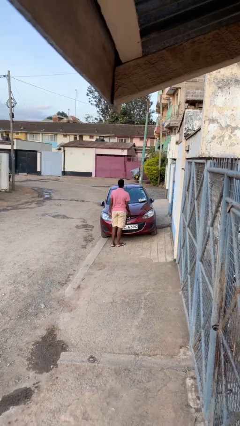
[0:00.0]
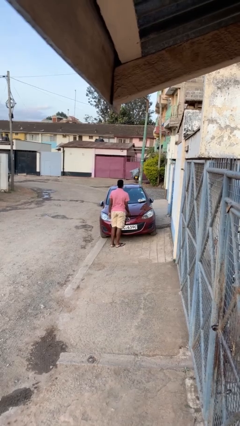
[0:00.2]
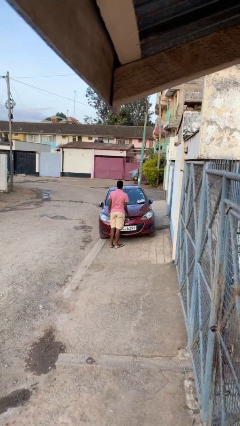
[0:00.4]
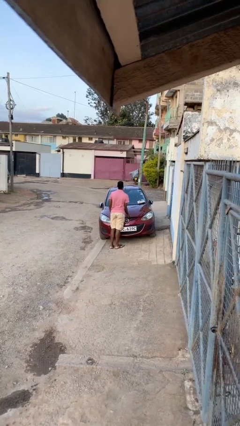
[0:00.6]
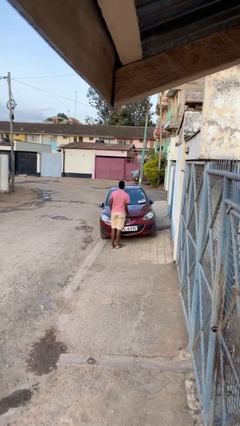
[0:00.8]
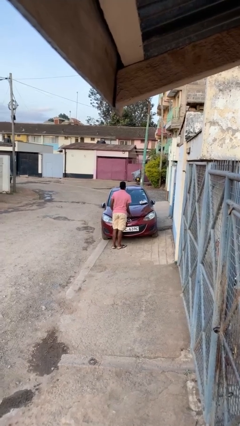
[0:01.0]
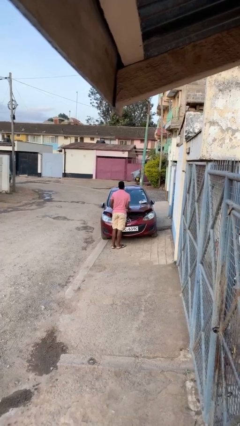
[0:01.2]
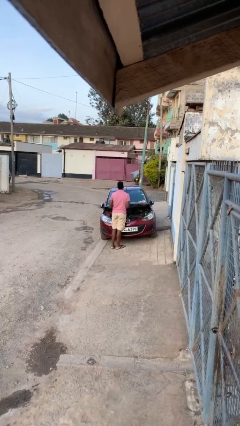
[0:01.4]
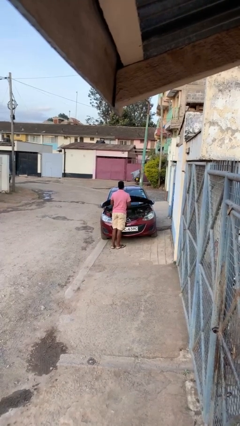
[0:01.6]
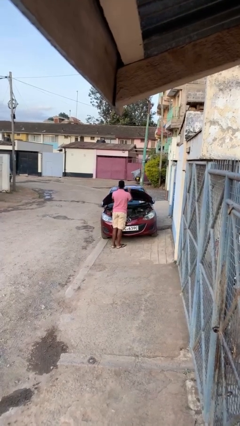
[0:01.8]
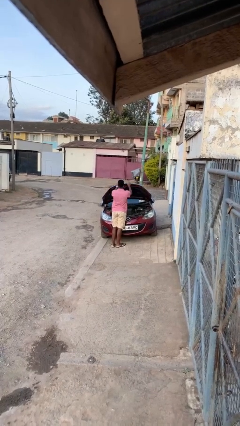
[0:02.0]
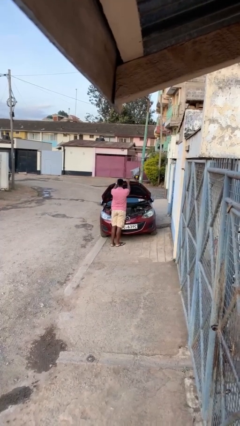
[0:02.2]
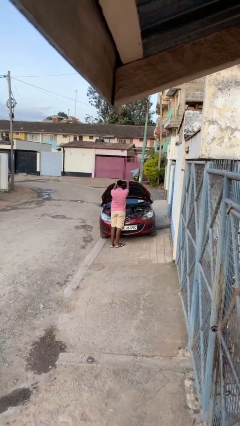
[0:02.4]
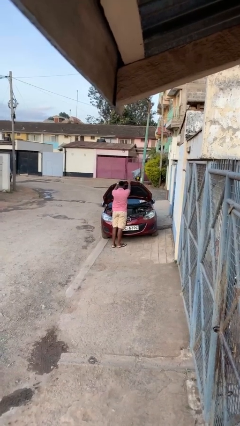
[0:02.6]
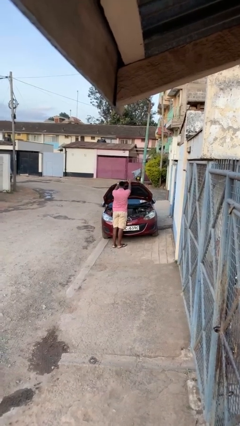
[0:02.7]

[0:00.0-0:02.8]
person opens car hood

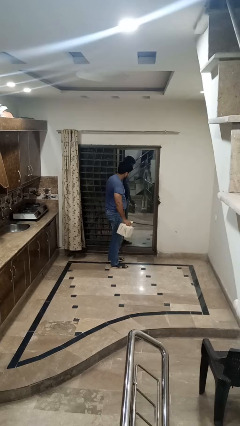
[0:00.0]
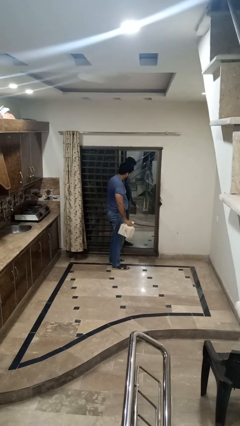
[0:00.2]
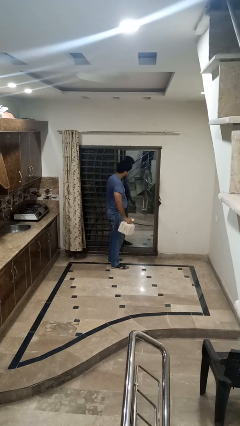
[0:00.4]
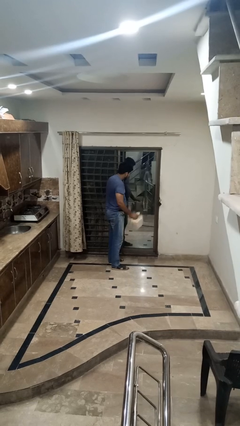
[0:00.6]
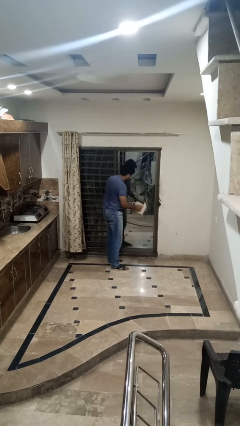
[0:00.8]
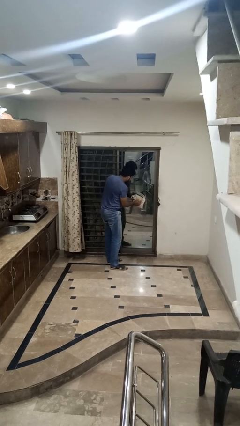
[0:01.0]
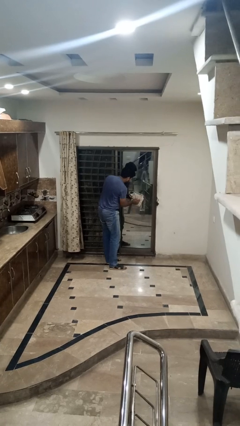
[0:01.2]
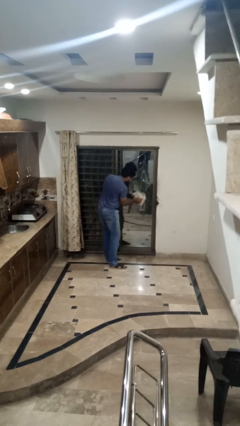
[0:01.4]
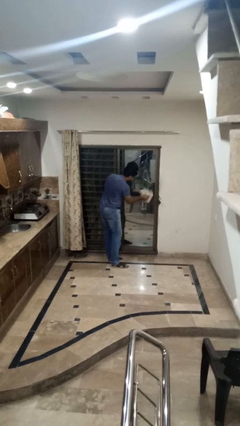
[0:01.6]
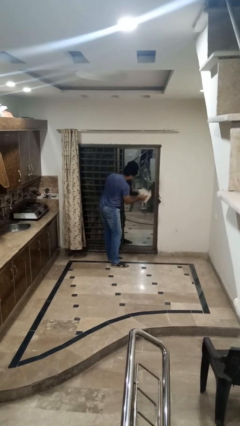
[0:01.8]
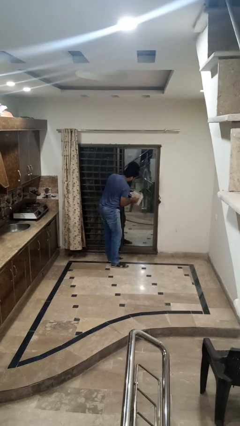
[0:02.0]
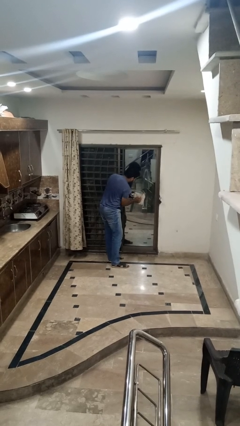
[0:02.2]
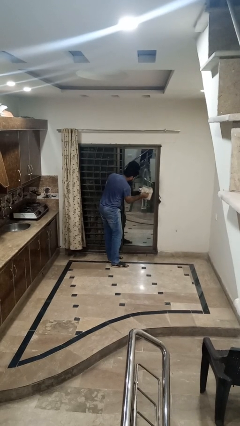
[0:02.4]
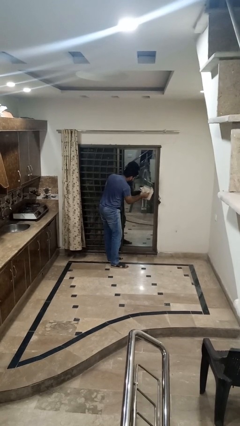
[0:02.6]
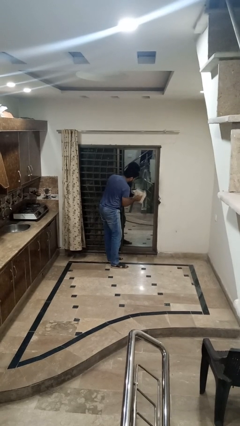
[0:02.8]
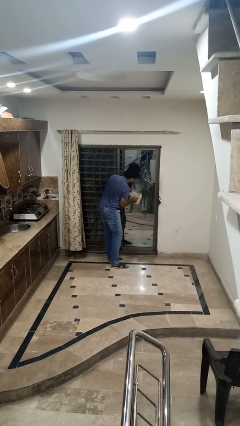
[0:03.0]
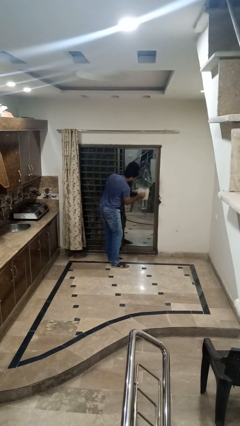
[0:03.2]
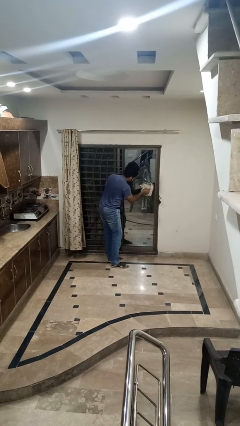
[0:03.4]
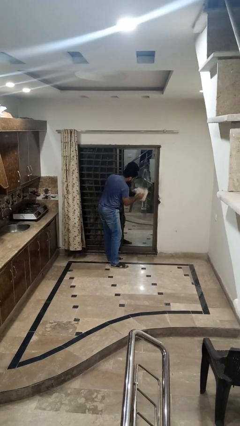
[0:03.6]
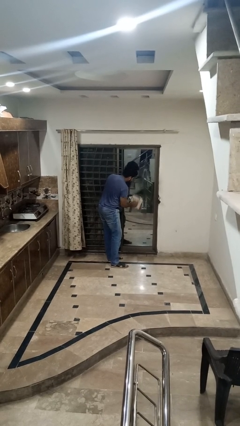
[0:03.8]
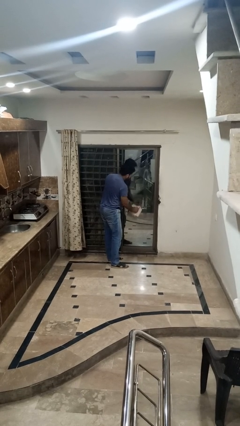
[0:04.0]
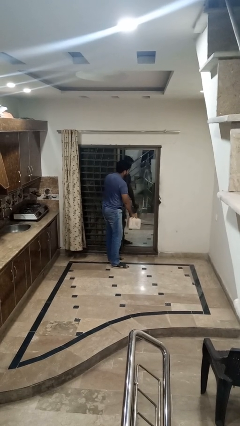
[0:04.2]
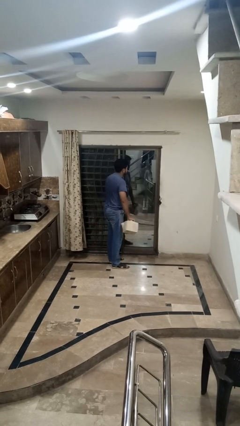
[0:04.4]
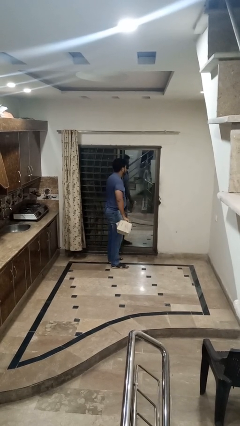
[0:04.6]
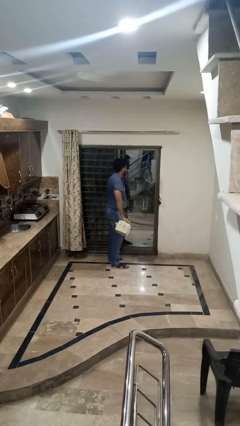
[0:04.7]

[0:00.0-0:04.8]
person washes window

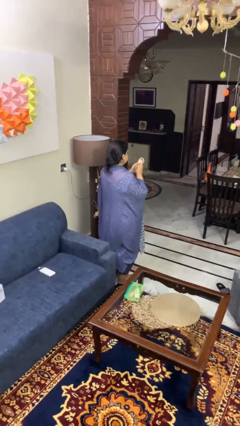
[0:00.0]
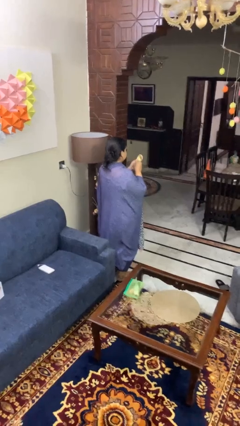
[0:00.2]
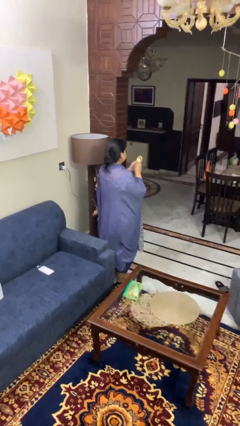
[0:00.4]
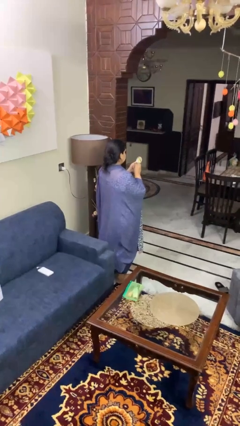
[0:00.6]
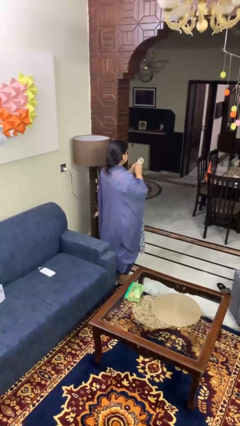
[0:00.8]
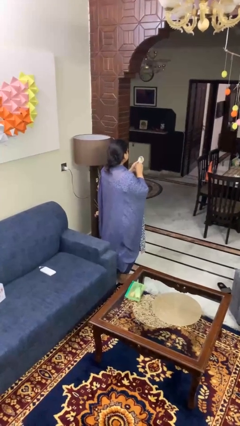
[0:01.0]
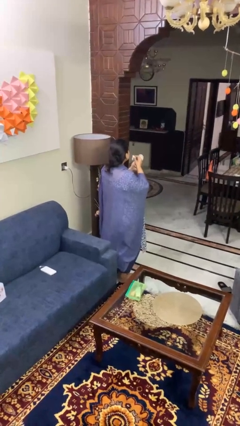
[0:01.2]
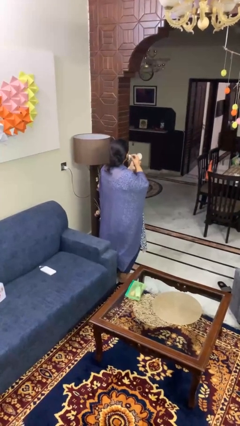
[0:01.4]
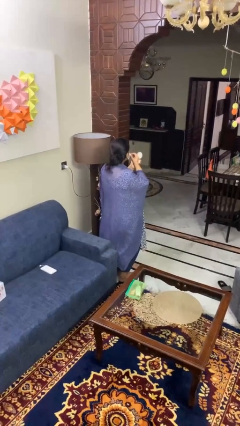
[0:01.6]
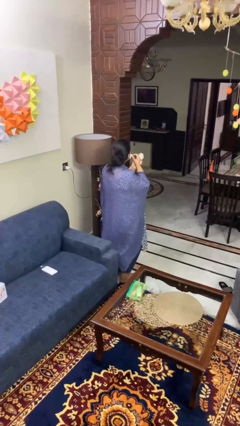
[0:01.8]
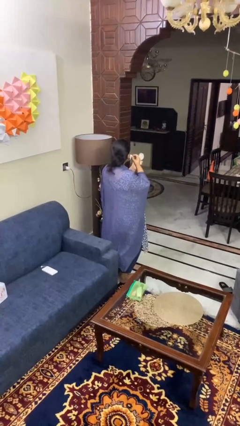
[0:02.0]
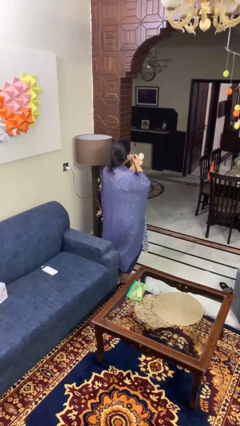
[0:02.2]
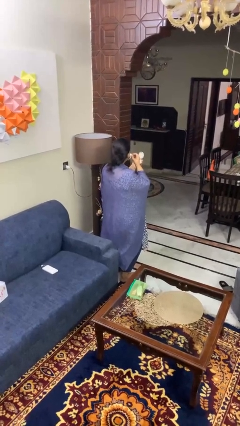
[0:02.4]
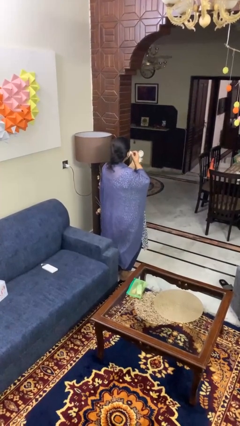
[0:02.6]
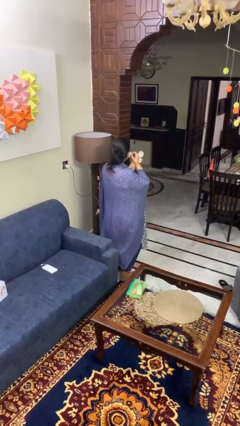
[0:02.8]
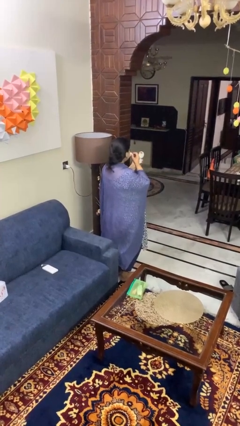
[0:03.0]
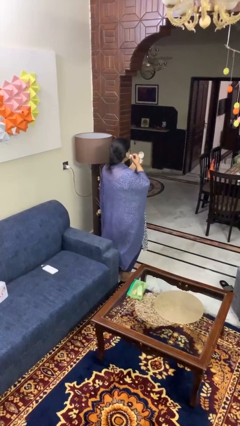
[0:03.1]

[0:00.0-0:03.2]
person applies foundation makeup

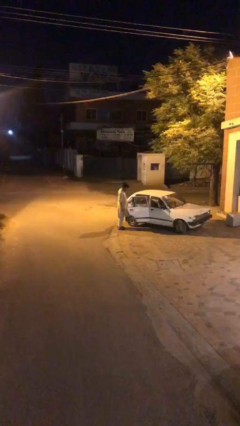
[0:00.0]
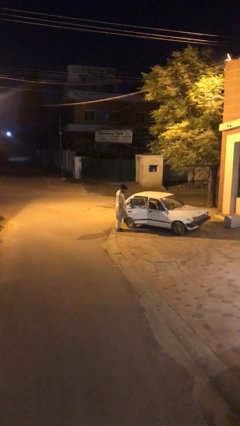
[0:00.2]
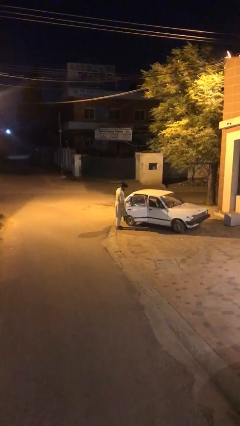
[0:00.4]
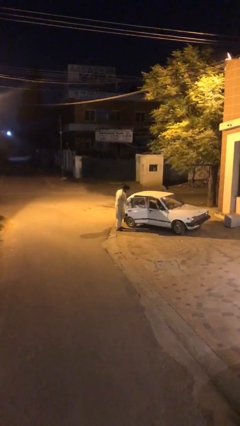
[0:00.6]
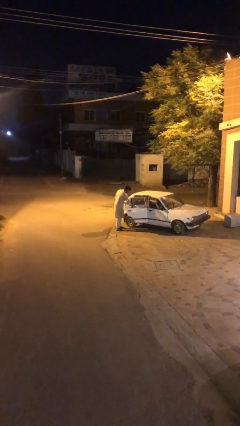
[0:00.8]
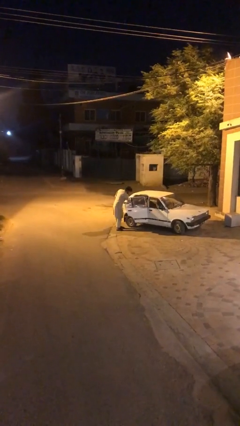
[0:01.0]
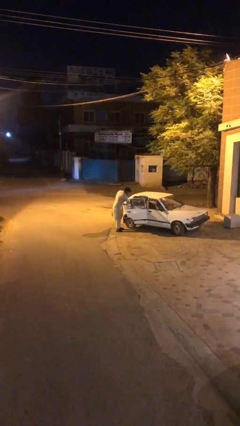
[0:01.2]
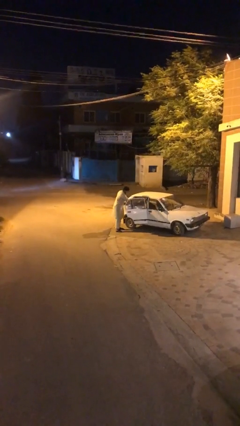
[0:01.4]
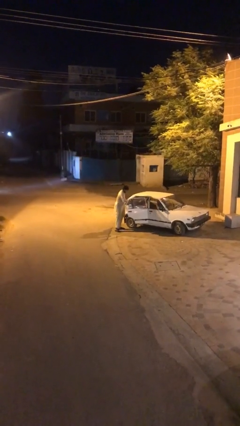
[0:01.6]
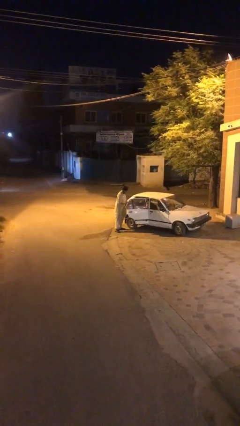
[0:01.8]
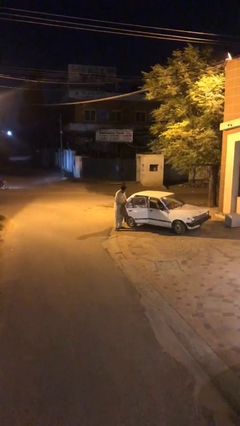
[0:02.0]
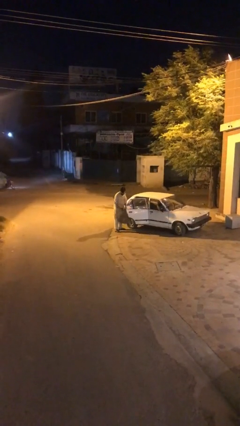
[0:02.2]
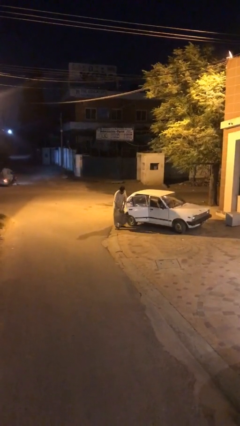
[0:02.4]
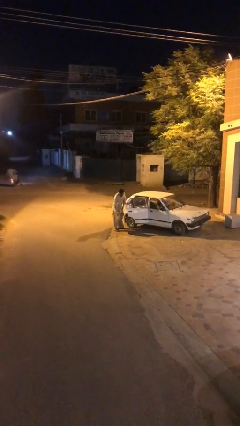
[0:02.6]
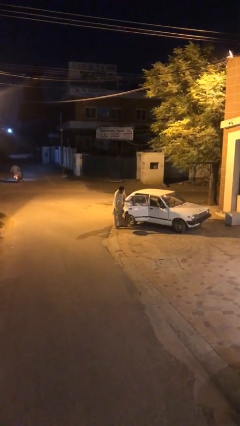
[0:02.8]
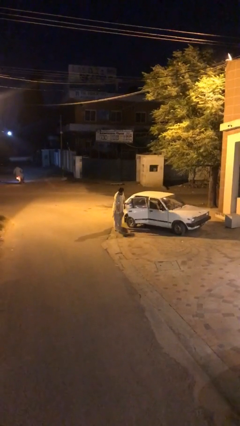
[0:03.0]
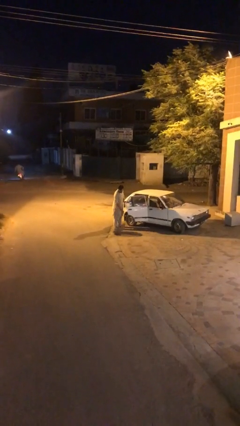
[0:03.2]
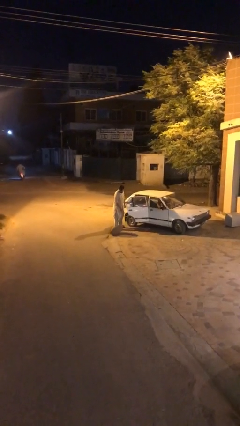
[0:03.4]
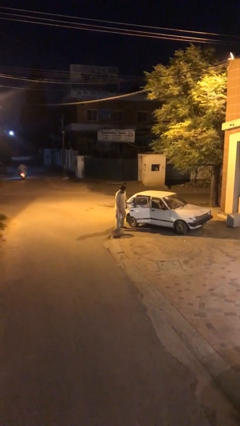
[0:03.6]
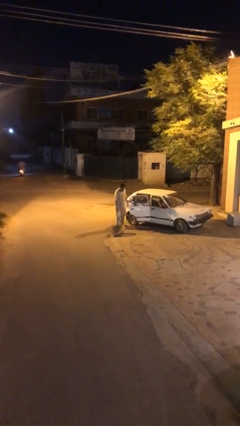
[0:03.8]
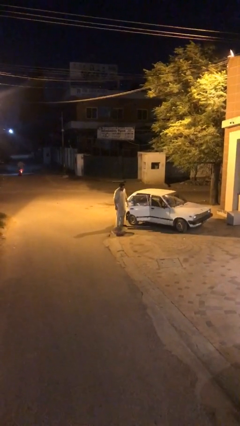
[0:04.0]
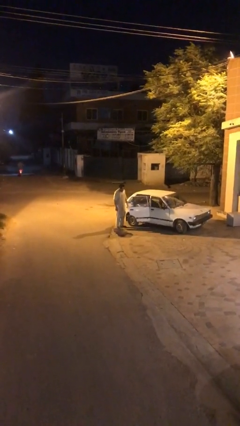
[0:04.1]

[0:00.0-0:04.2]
person unloads car

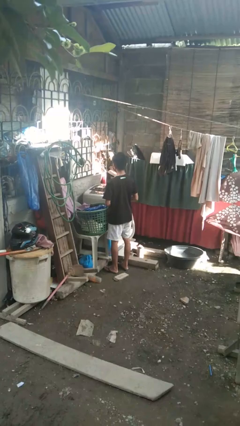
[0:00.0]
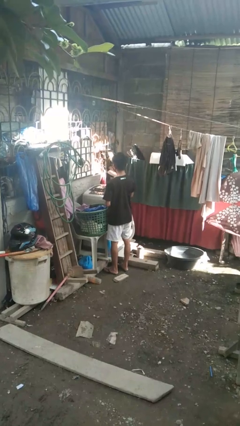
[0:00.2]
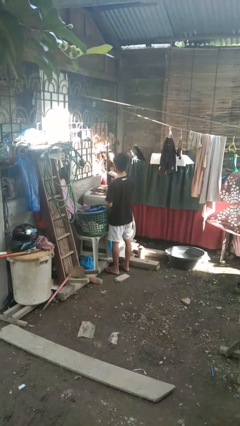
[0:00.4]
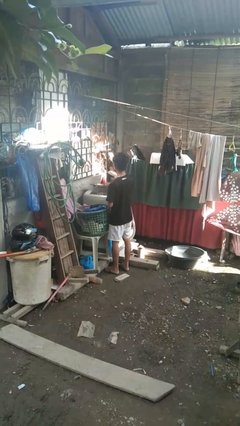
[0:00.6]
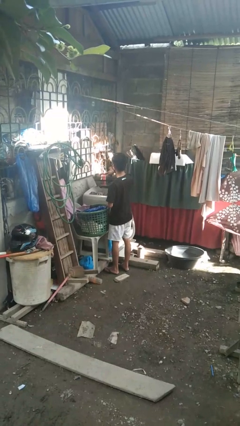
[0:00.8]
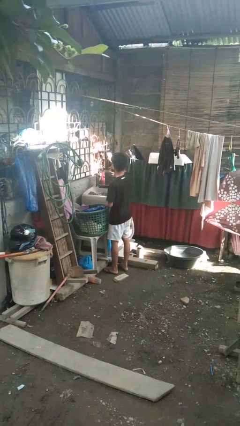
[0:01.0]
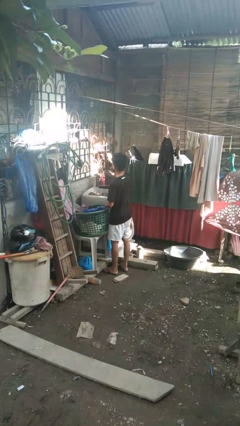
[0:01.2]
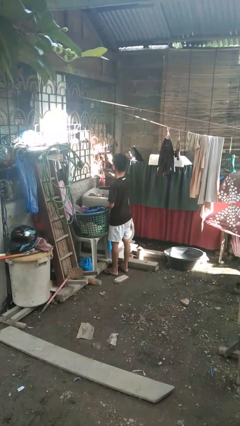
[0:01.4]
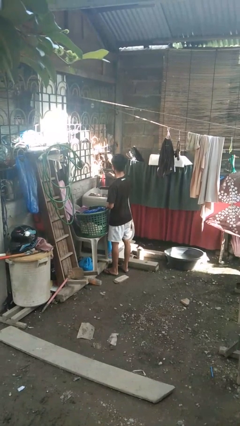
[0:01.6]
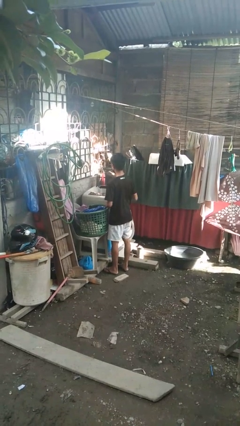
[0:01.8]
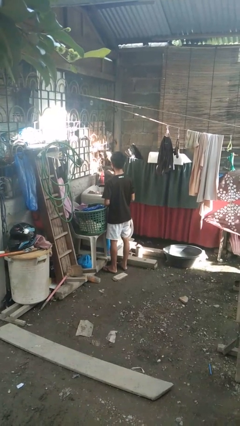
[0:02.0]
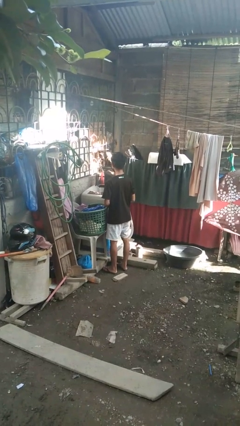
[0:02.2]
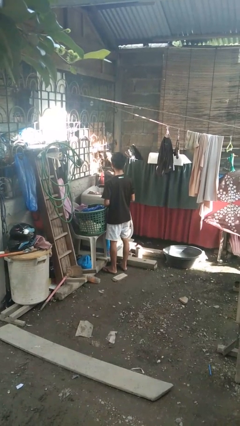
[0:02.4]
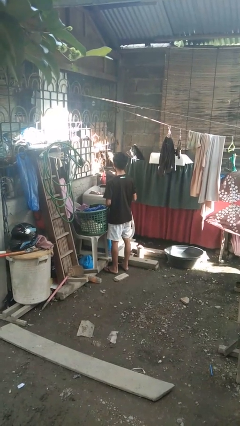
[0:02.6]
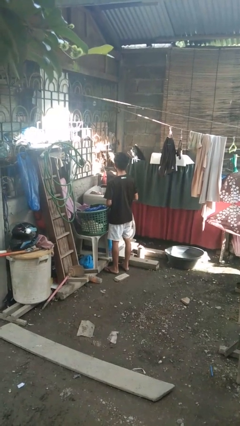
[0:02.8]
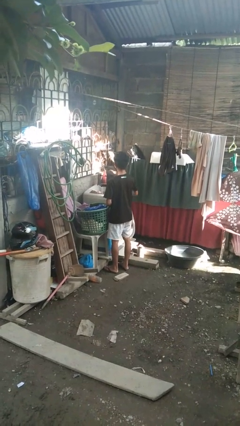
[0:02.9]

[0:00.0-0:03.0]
person opens clothes washer
